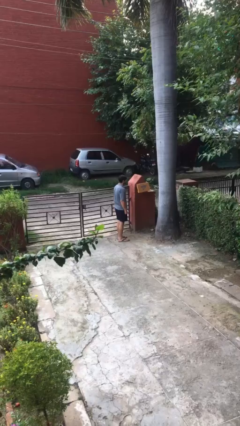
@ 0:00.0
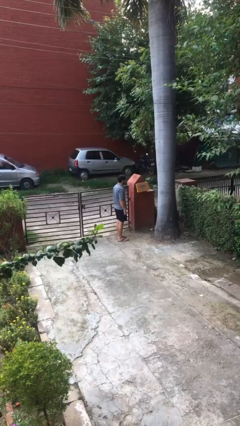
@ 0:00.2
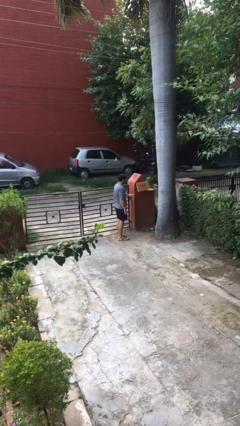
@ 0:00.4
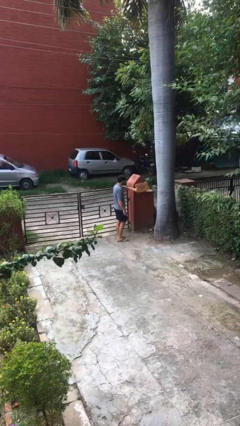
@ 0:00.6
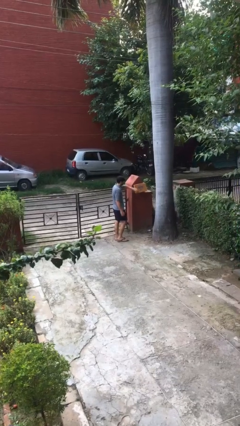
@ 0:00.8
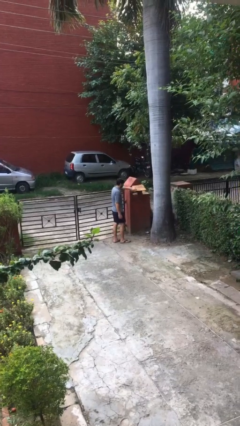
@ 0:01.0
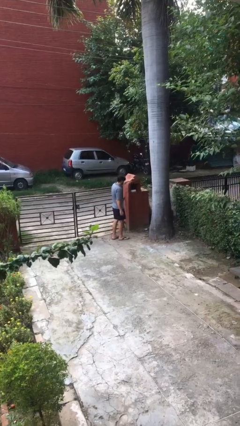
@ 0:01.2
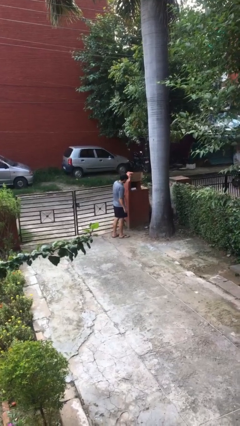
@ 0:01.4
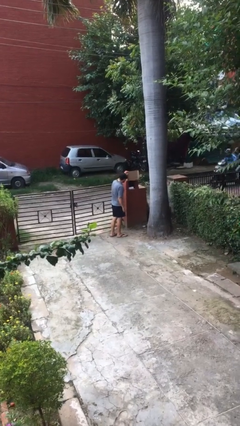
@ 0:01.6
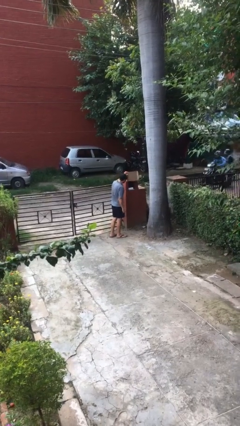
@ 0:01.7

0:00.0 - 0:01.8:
person opens mailbox

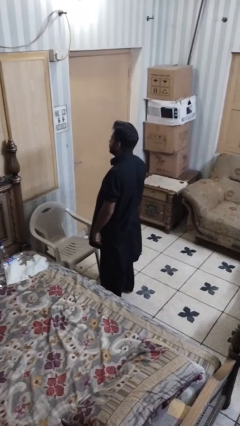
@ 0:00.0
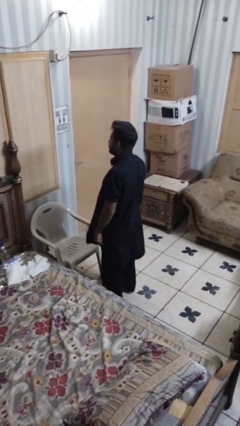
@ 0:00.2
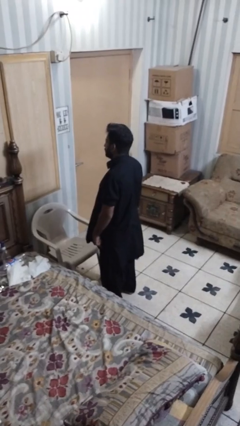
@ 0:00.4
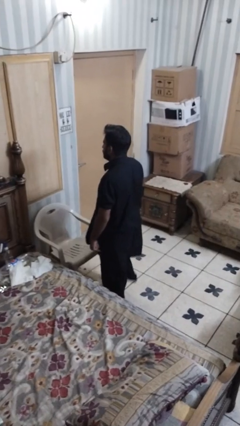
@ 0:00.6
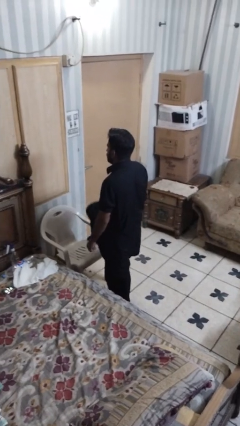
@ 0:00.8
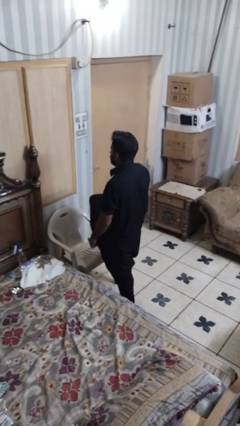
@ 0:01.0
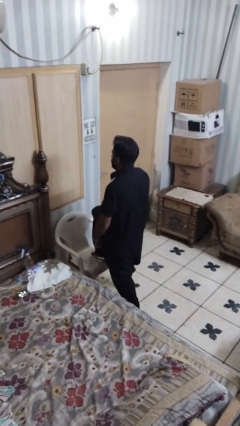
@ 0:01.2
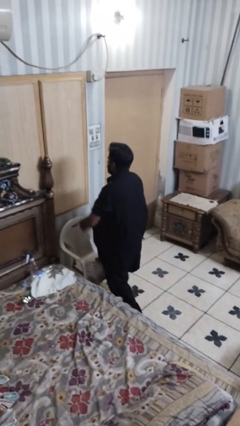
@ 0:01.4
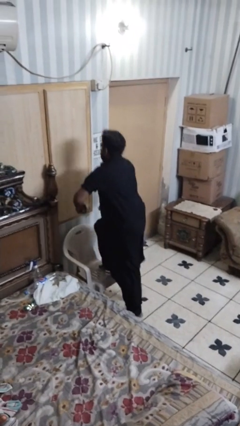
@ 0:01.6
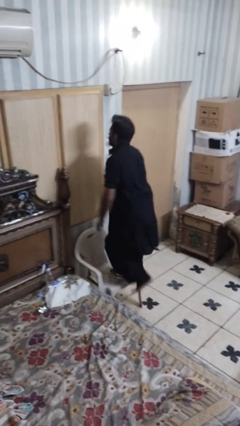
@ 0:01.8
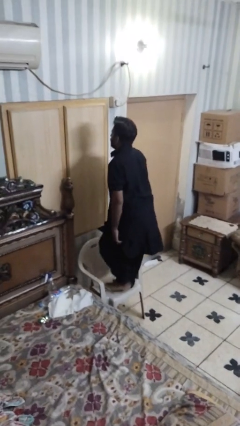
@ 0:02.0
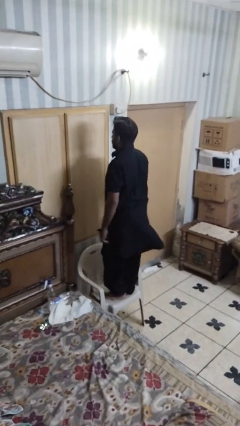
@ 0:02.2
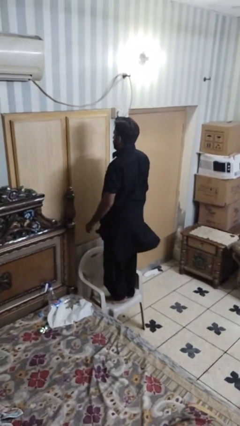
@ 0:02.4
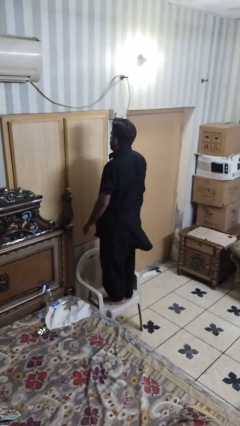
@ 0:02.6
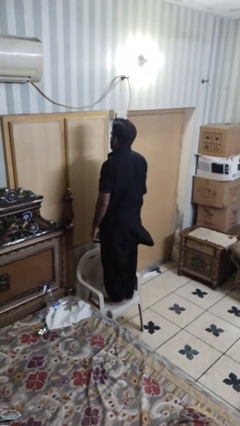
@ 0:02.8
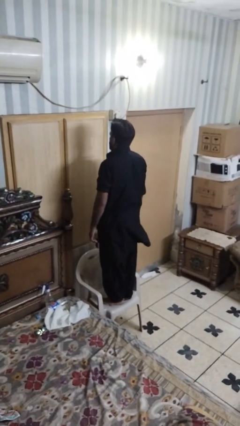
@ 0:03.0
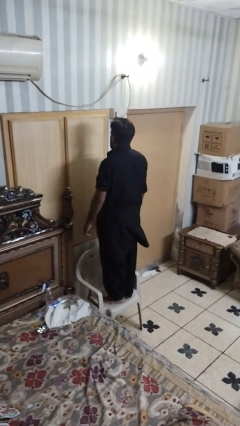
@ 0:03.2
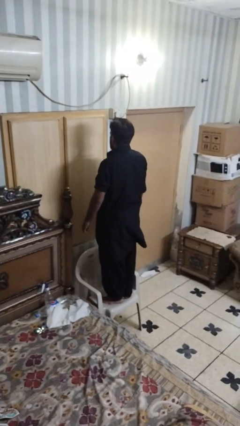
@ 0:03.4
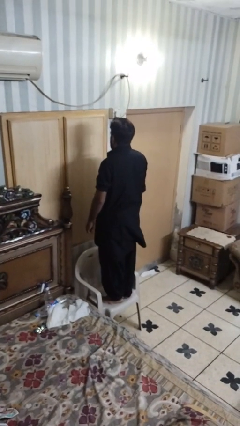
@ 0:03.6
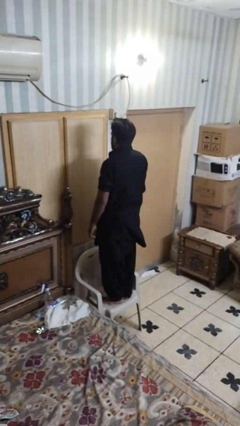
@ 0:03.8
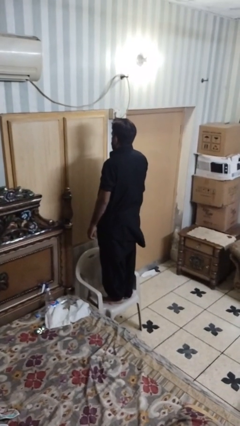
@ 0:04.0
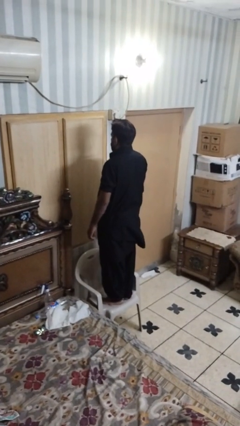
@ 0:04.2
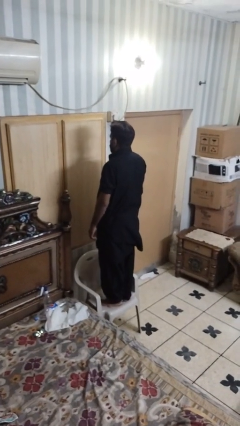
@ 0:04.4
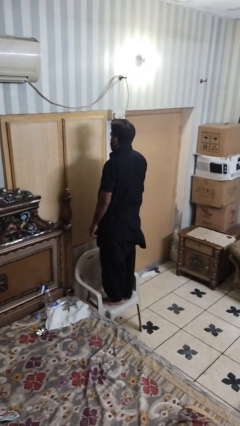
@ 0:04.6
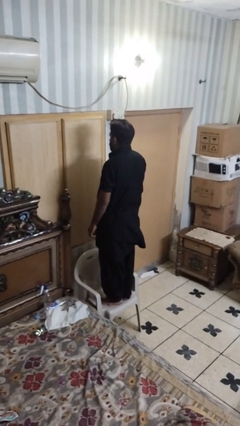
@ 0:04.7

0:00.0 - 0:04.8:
person climbs on chair

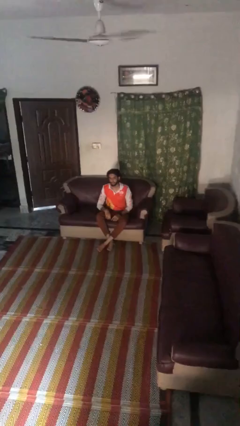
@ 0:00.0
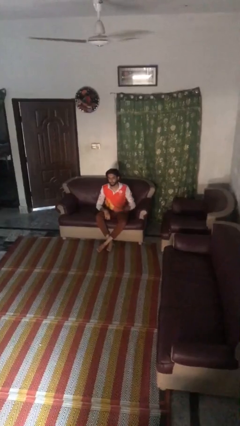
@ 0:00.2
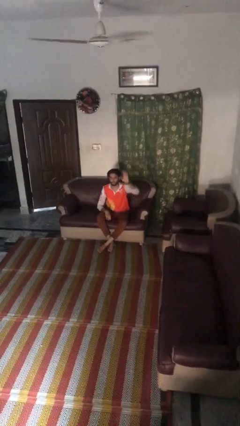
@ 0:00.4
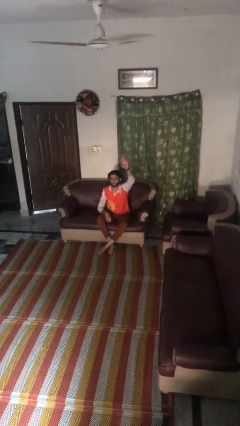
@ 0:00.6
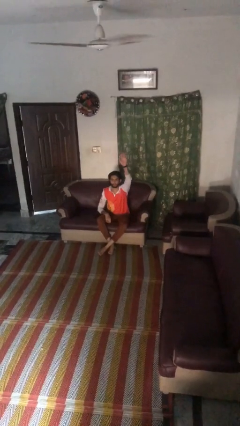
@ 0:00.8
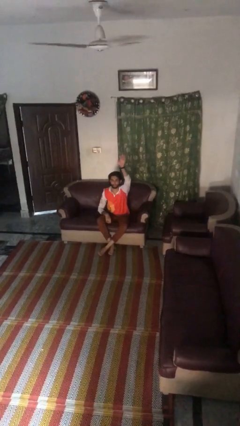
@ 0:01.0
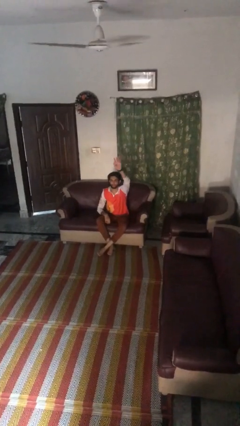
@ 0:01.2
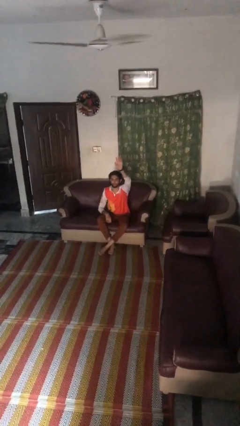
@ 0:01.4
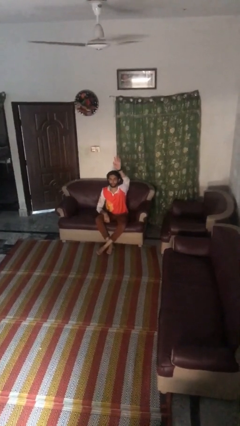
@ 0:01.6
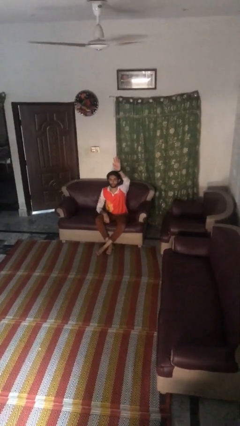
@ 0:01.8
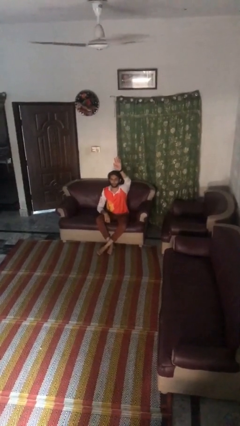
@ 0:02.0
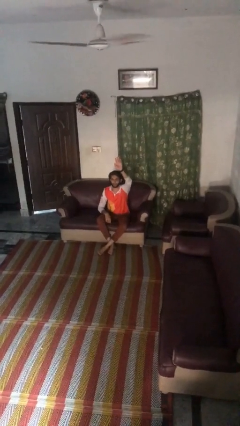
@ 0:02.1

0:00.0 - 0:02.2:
person gestures raise hand

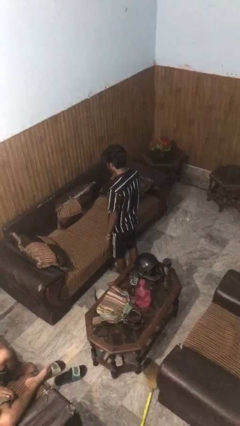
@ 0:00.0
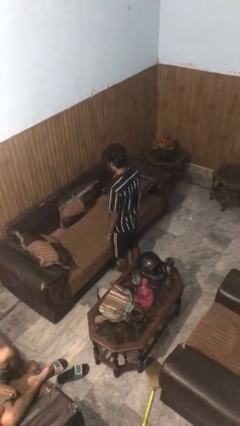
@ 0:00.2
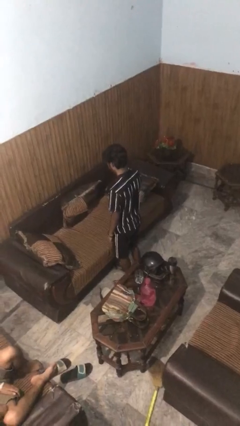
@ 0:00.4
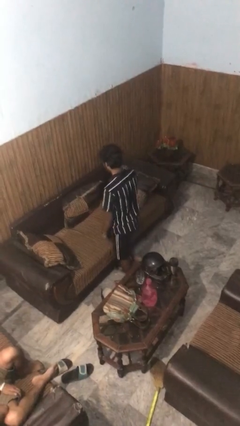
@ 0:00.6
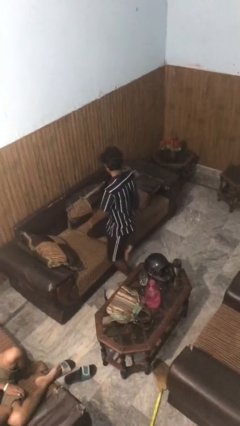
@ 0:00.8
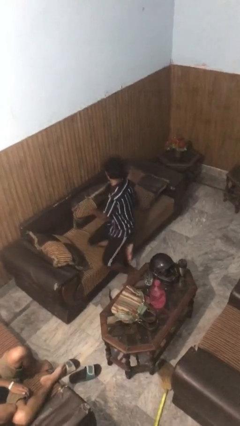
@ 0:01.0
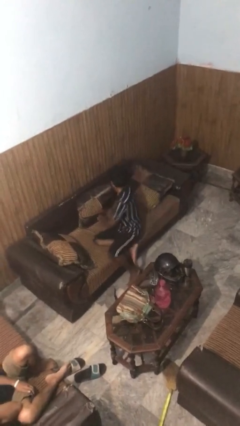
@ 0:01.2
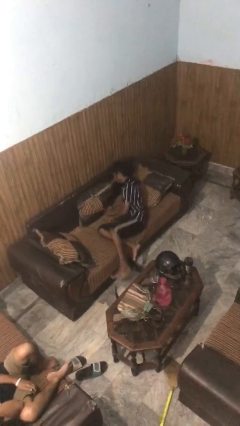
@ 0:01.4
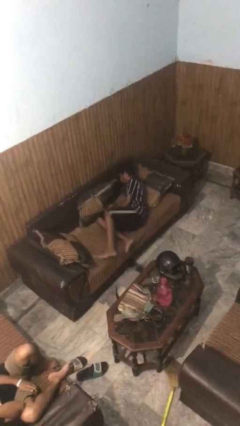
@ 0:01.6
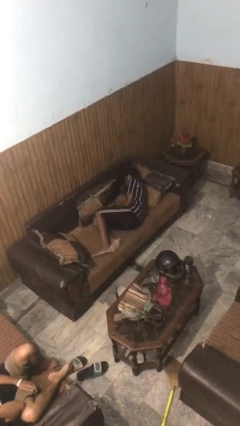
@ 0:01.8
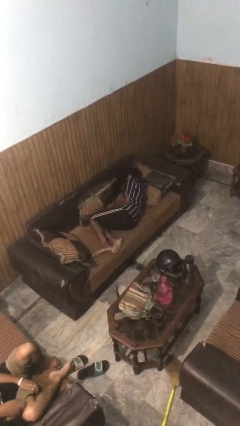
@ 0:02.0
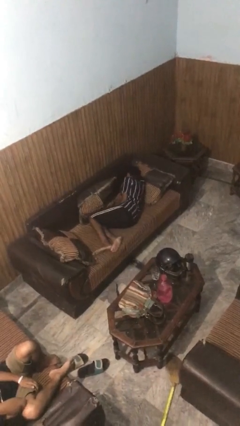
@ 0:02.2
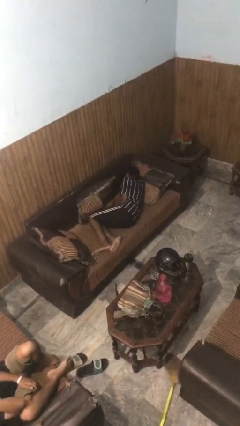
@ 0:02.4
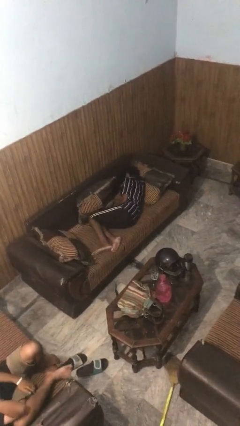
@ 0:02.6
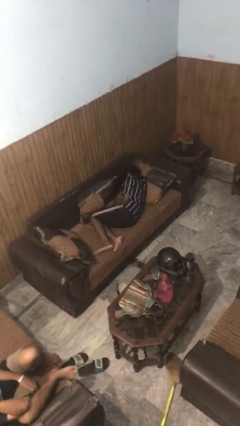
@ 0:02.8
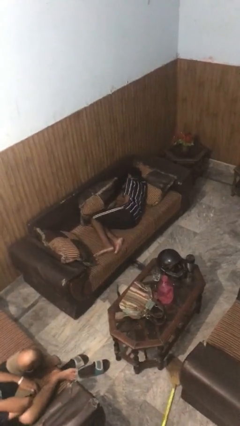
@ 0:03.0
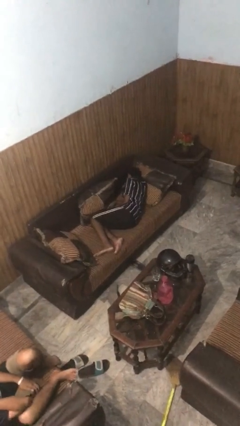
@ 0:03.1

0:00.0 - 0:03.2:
person lies down on couch

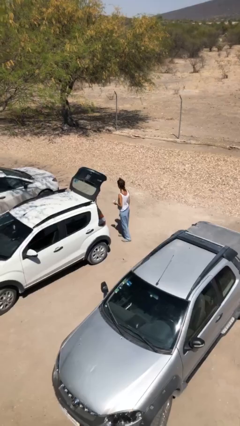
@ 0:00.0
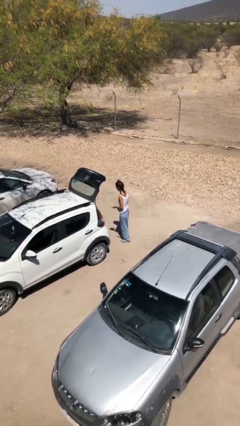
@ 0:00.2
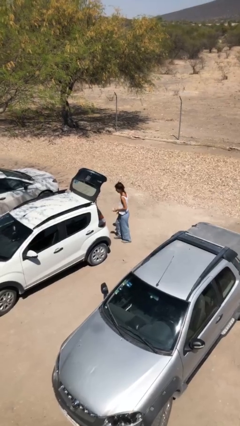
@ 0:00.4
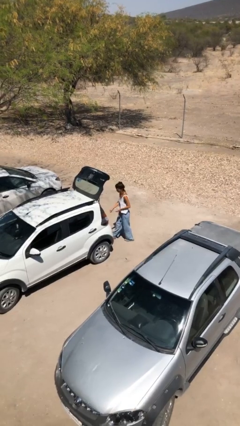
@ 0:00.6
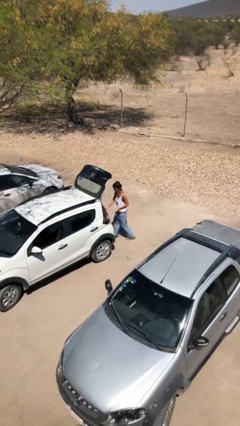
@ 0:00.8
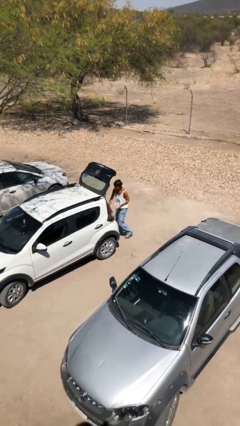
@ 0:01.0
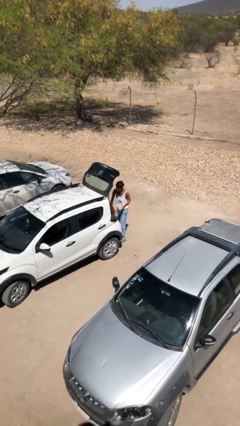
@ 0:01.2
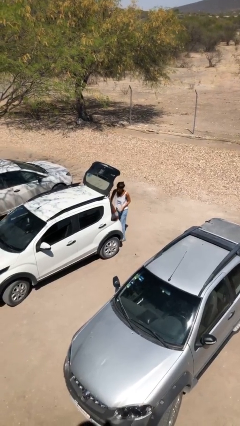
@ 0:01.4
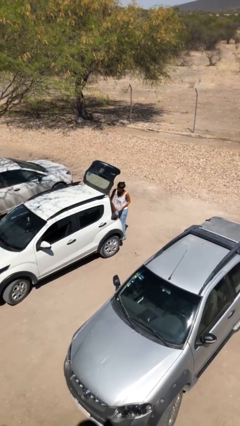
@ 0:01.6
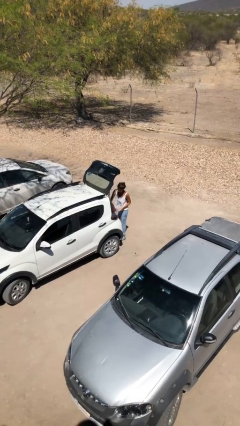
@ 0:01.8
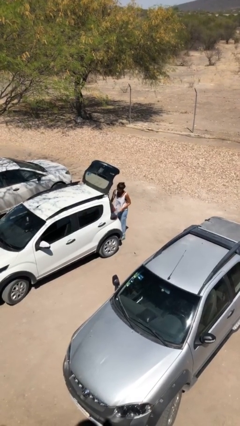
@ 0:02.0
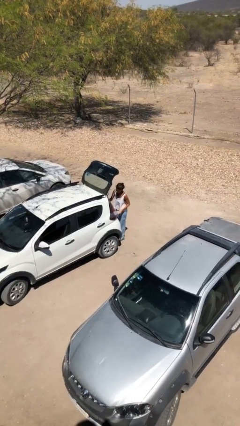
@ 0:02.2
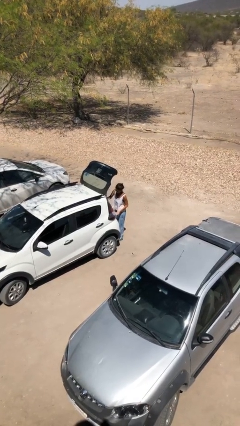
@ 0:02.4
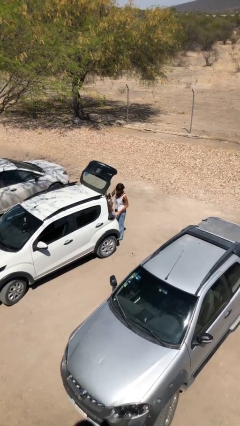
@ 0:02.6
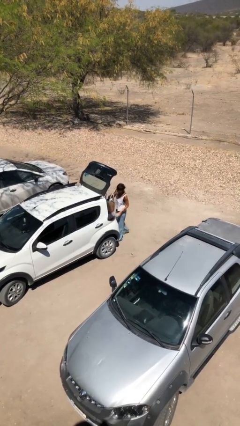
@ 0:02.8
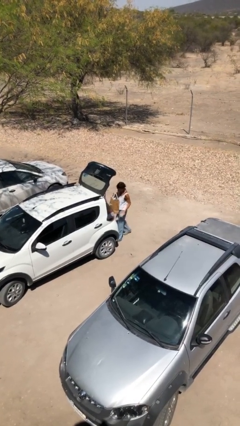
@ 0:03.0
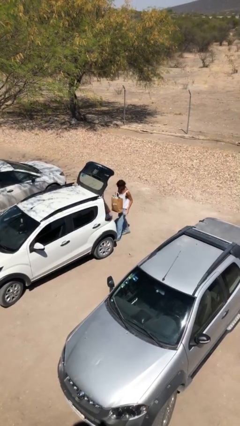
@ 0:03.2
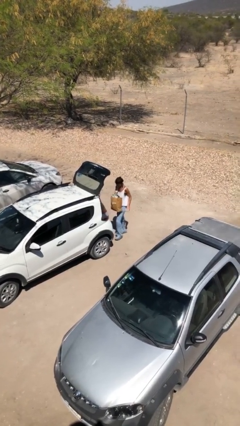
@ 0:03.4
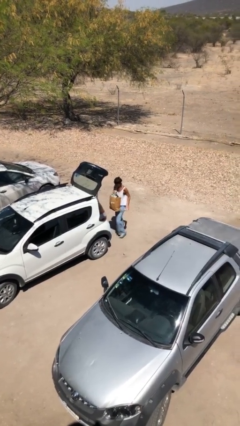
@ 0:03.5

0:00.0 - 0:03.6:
person unloads car

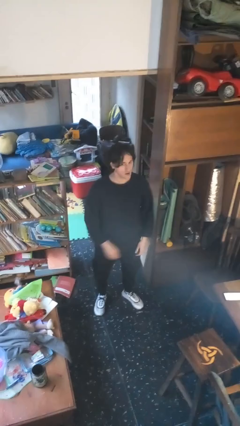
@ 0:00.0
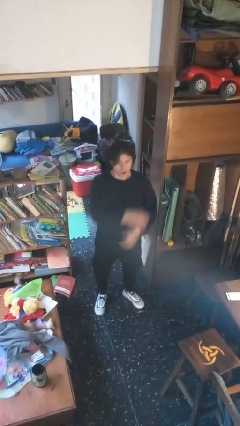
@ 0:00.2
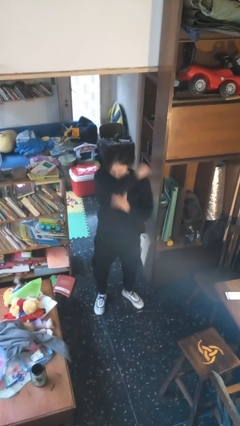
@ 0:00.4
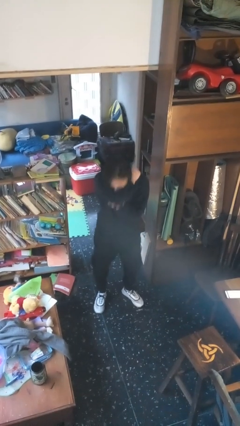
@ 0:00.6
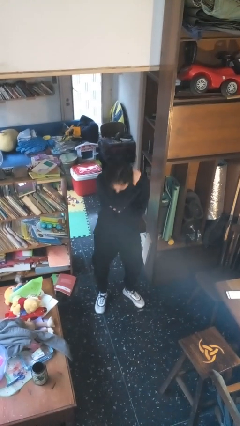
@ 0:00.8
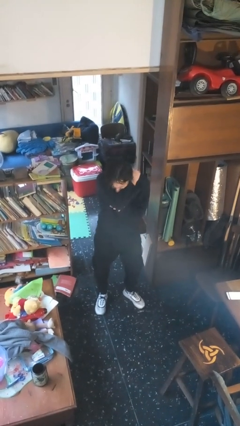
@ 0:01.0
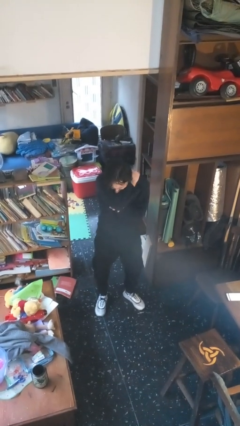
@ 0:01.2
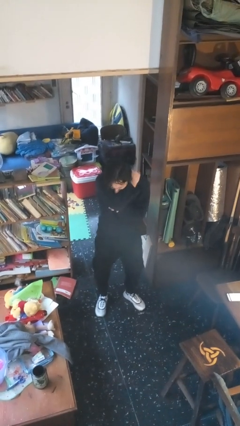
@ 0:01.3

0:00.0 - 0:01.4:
person sneezes into arm

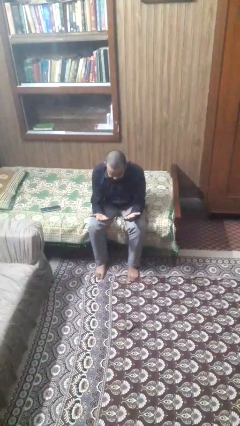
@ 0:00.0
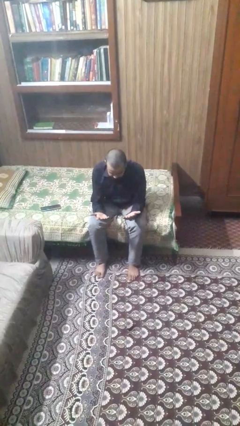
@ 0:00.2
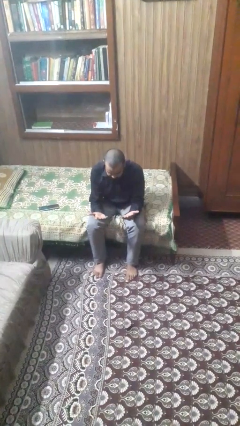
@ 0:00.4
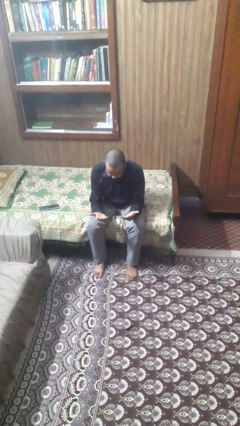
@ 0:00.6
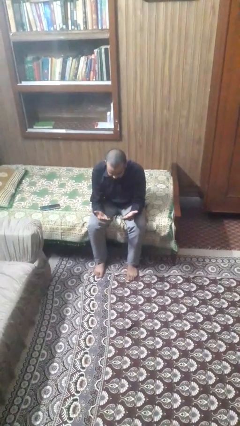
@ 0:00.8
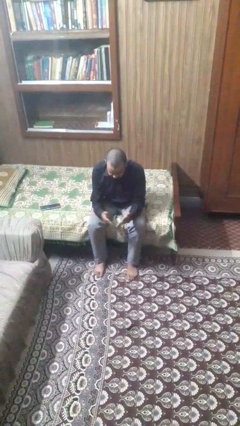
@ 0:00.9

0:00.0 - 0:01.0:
person looks at hands in lap
